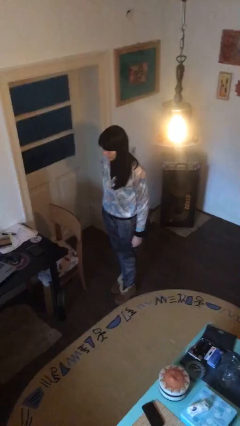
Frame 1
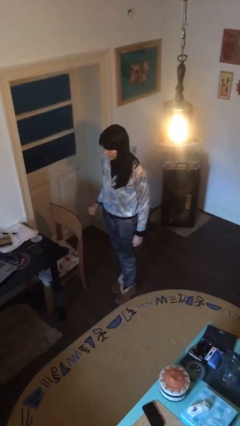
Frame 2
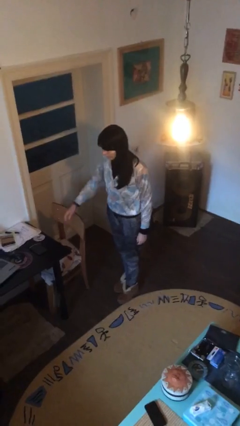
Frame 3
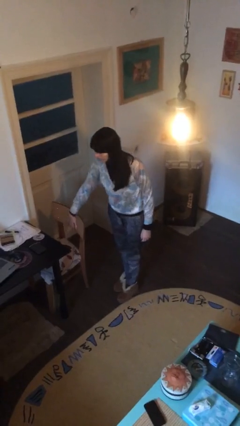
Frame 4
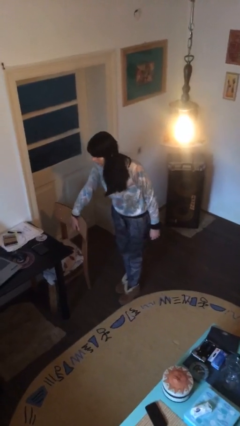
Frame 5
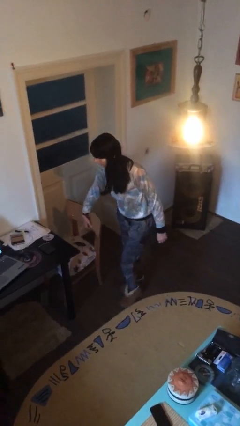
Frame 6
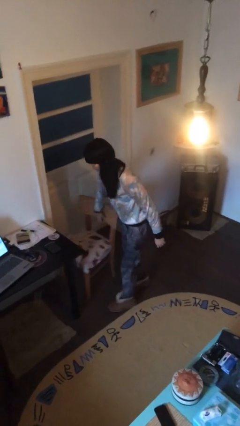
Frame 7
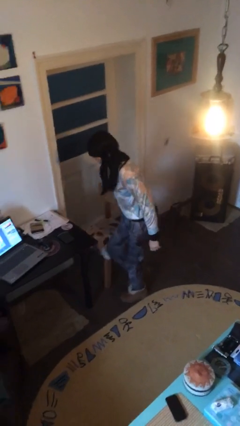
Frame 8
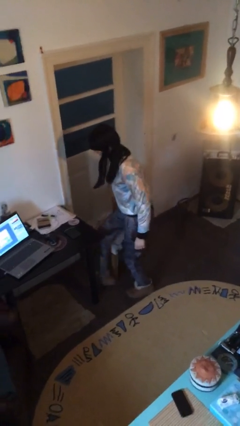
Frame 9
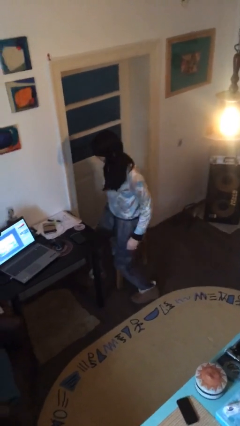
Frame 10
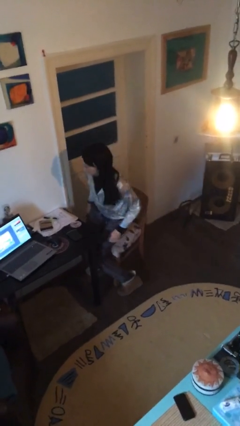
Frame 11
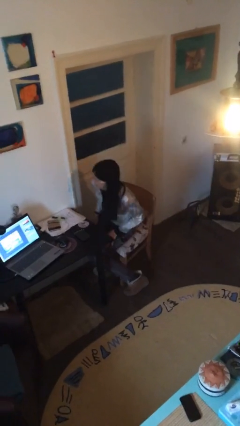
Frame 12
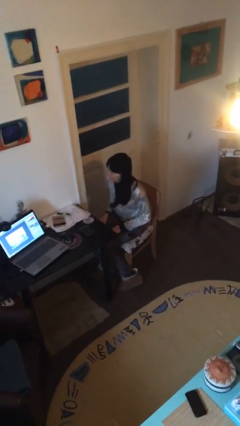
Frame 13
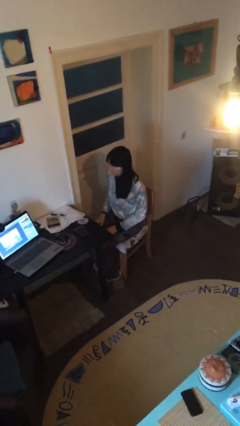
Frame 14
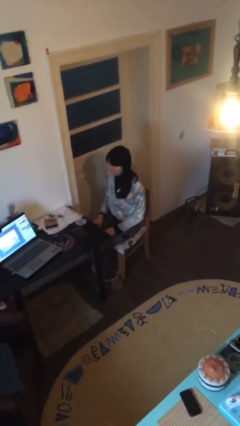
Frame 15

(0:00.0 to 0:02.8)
person sits down

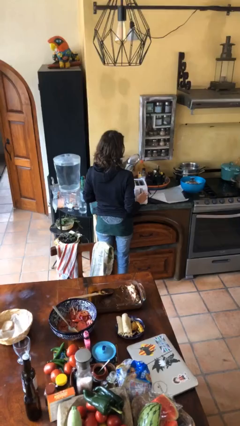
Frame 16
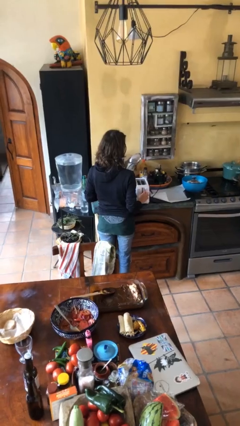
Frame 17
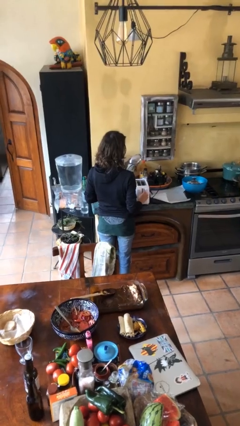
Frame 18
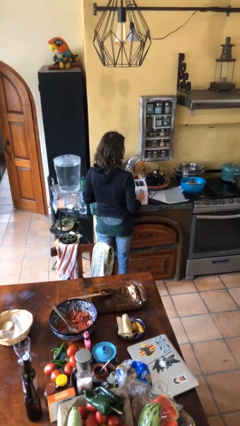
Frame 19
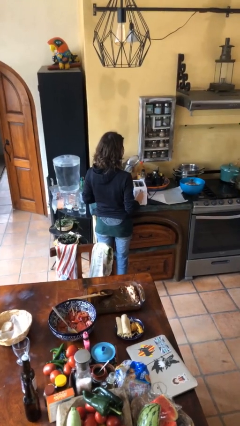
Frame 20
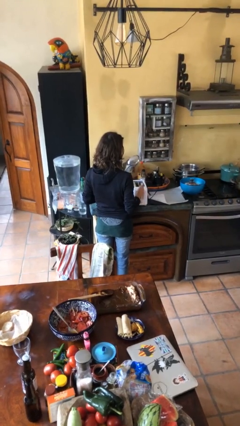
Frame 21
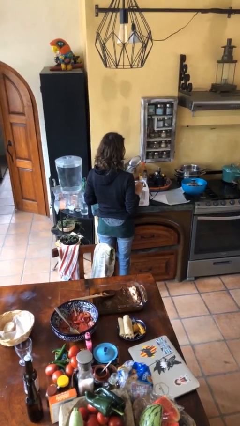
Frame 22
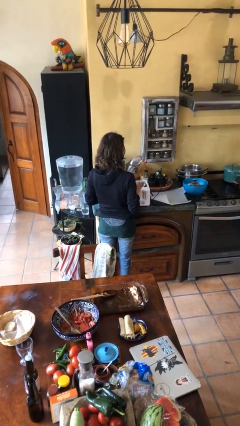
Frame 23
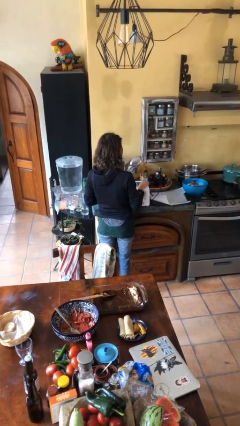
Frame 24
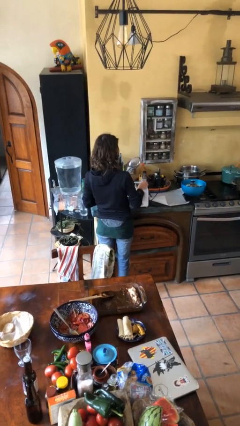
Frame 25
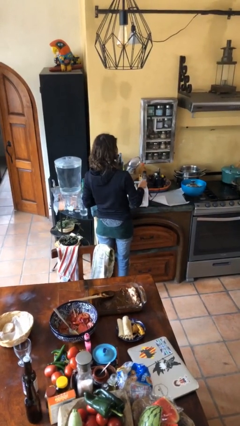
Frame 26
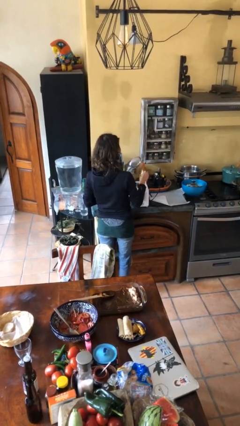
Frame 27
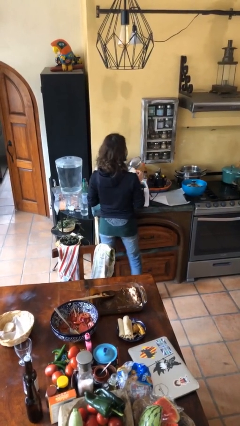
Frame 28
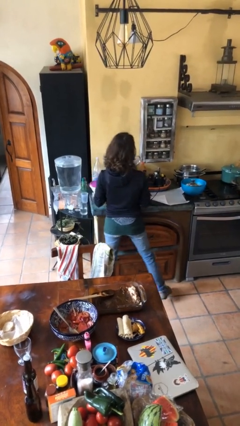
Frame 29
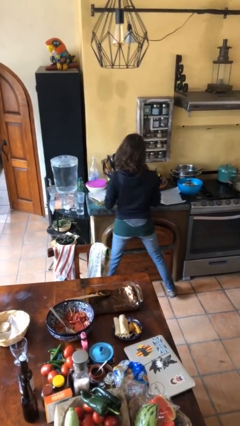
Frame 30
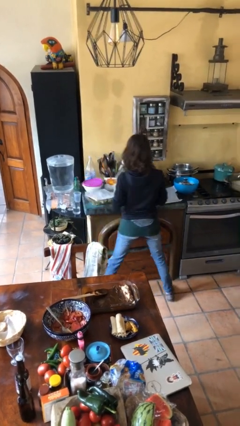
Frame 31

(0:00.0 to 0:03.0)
person takes object from toaster

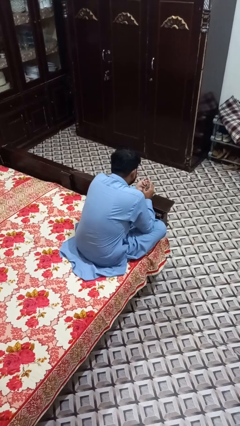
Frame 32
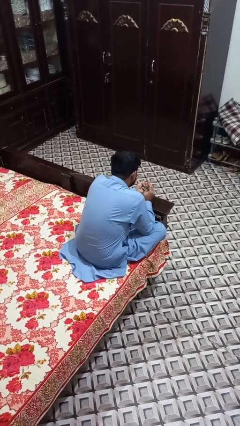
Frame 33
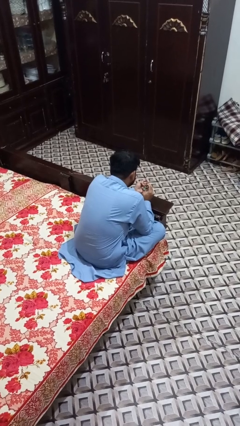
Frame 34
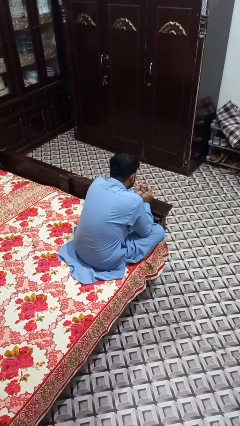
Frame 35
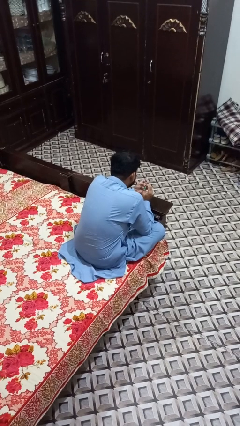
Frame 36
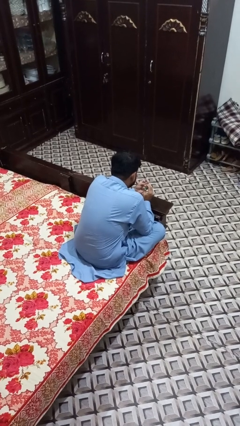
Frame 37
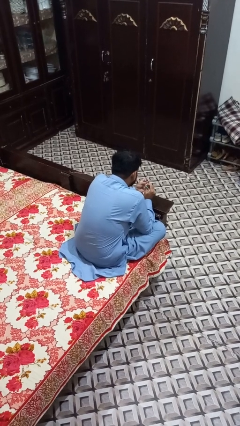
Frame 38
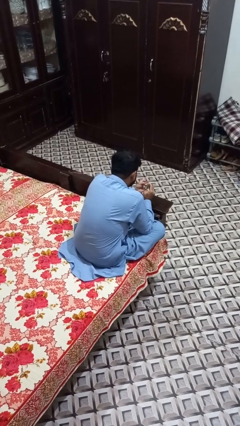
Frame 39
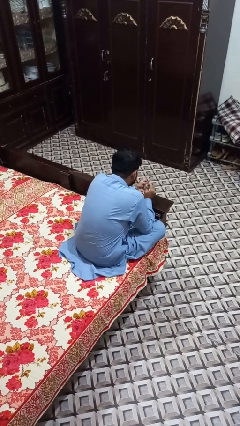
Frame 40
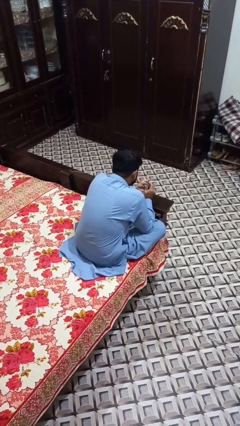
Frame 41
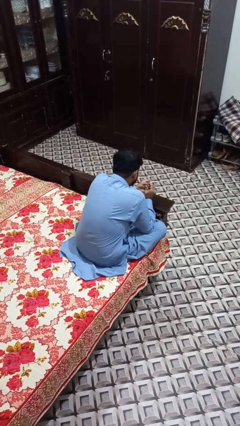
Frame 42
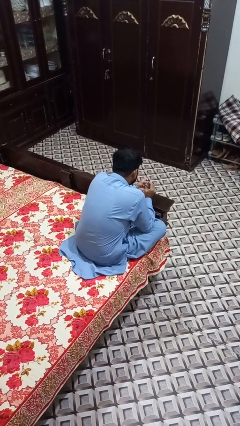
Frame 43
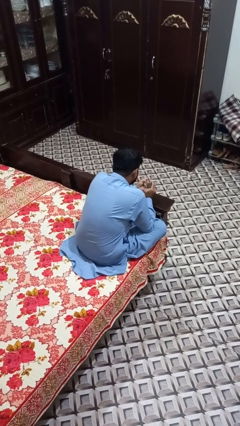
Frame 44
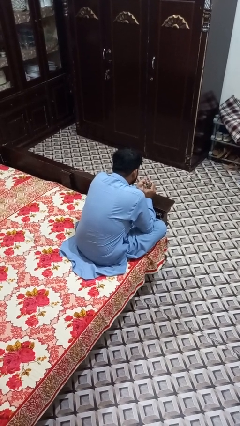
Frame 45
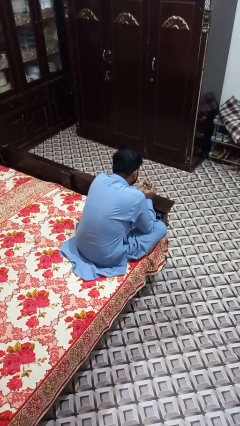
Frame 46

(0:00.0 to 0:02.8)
person clips fingernails

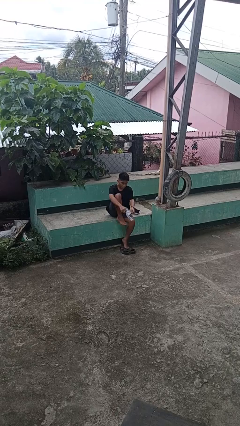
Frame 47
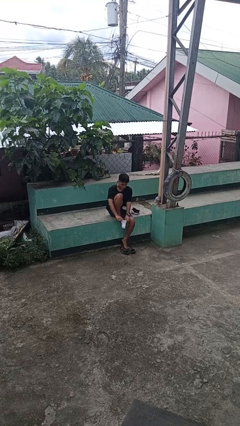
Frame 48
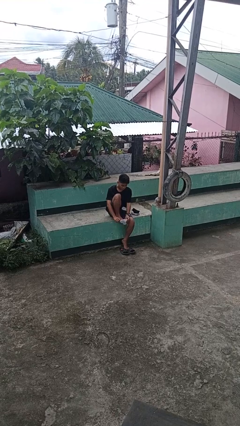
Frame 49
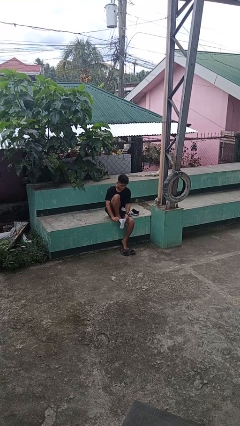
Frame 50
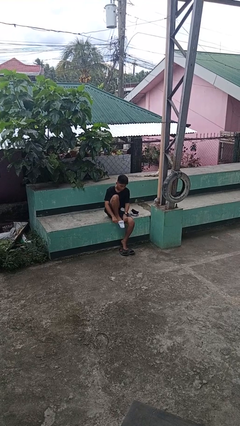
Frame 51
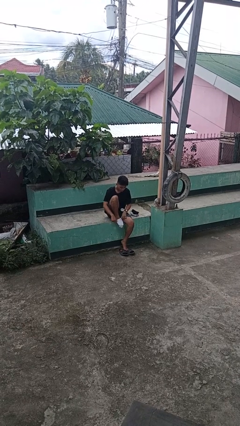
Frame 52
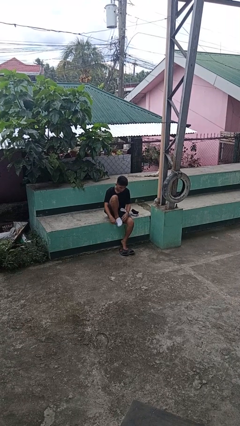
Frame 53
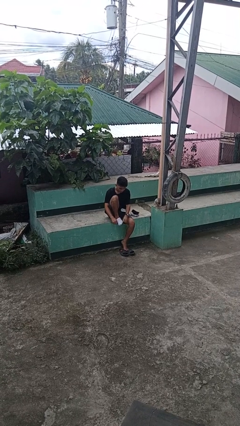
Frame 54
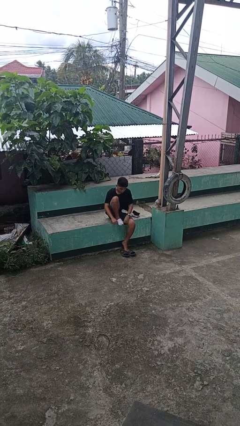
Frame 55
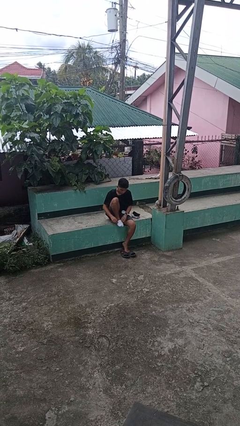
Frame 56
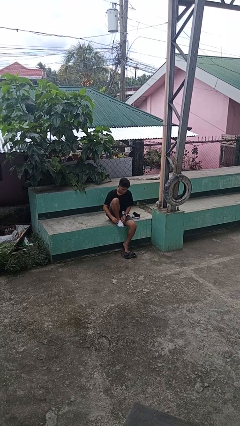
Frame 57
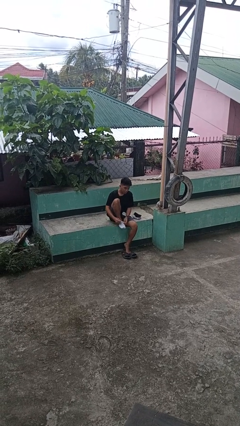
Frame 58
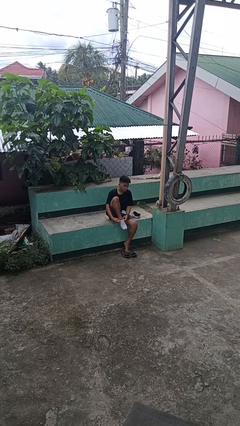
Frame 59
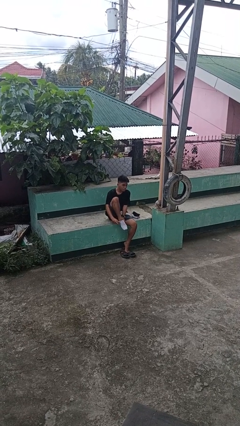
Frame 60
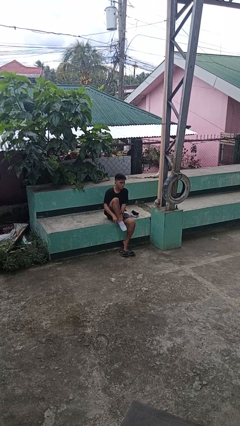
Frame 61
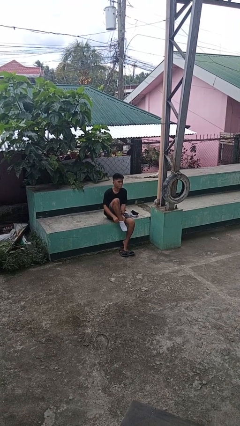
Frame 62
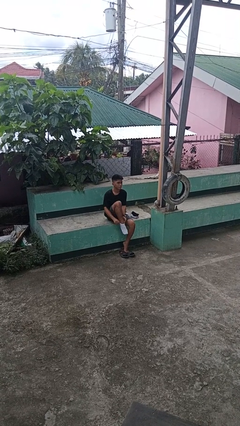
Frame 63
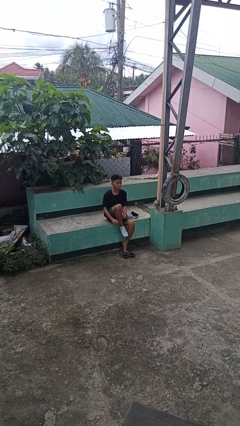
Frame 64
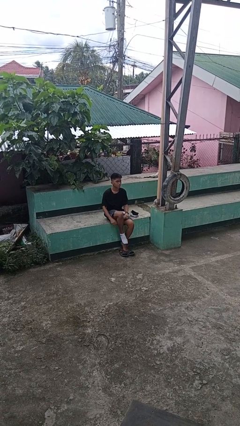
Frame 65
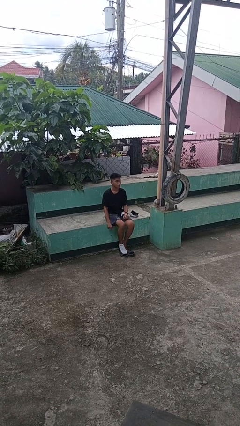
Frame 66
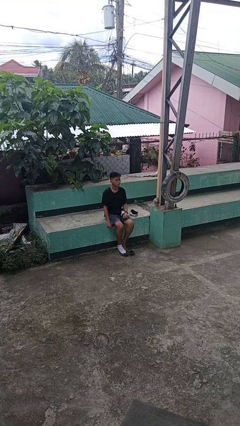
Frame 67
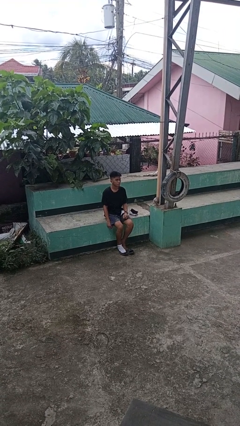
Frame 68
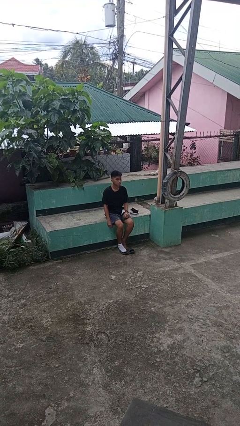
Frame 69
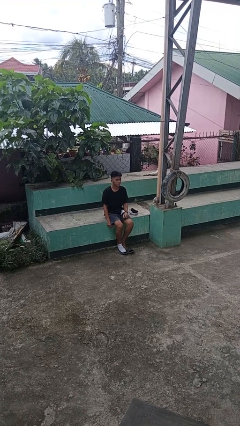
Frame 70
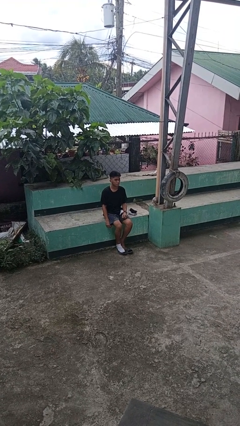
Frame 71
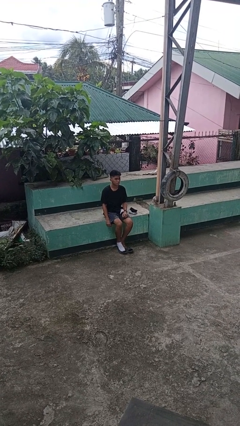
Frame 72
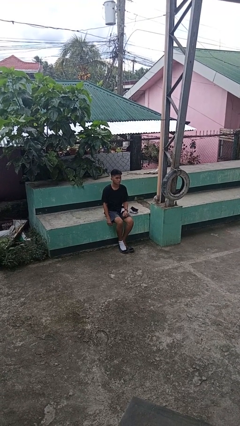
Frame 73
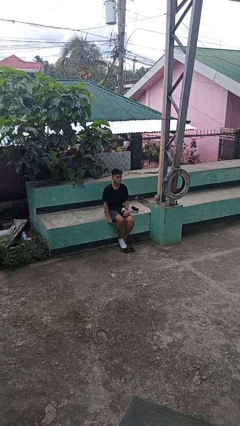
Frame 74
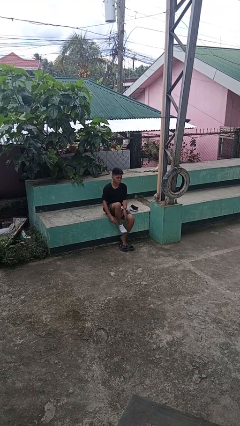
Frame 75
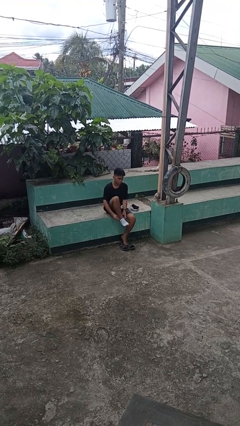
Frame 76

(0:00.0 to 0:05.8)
person puts on socks

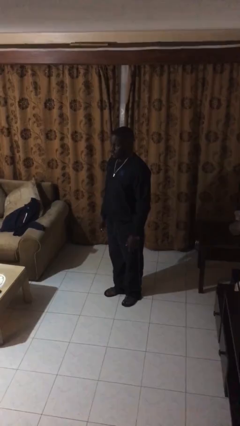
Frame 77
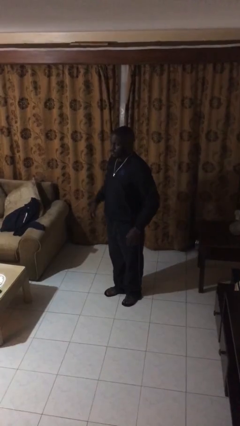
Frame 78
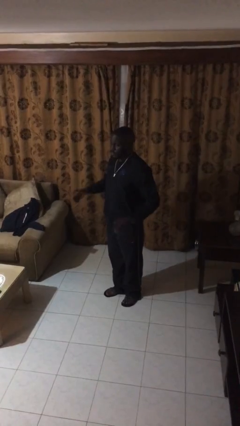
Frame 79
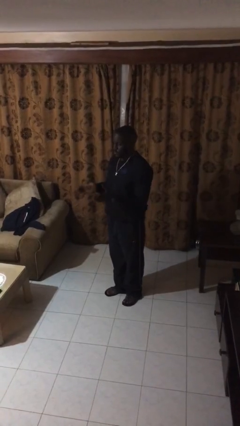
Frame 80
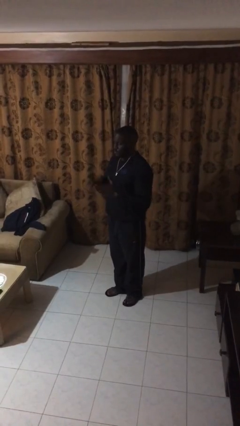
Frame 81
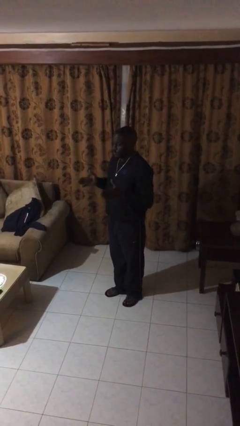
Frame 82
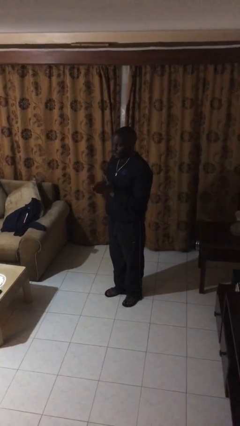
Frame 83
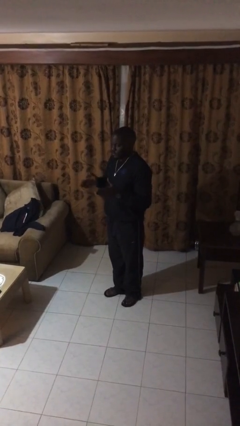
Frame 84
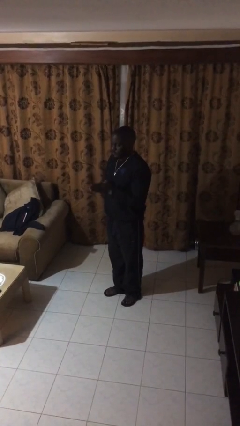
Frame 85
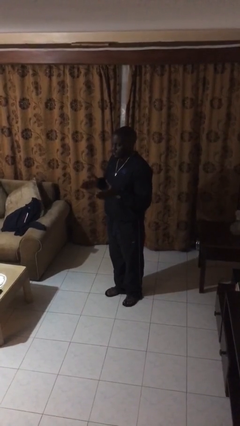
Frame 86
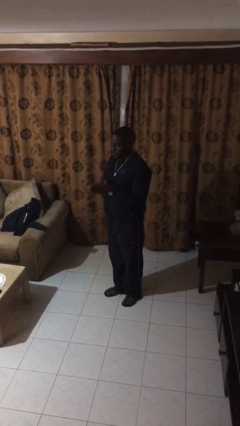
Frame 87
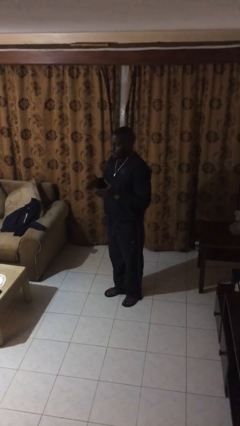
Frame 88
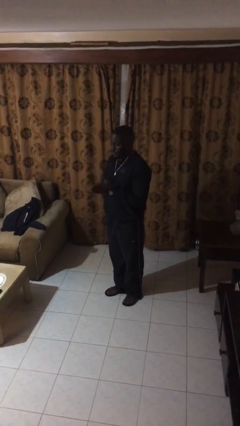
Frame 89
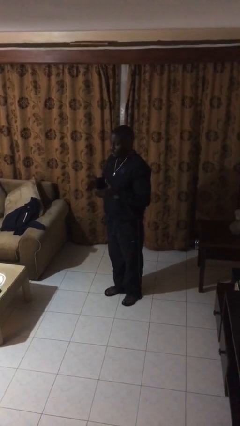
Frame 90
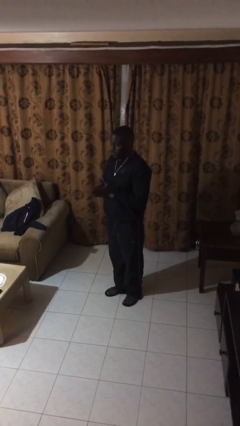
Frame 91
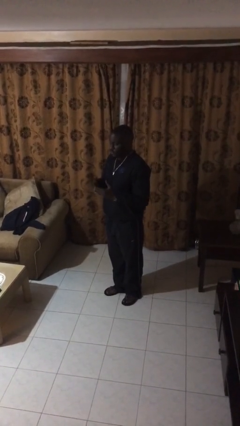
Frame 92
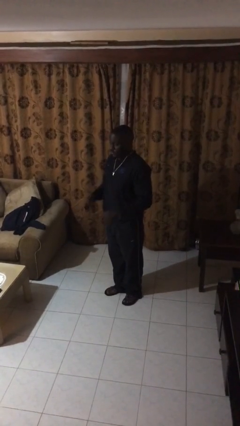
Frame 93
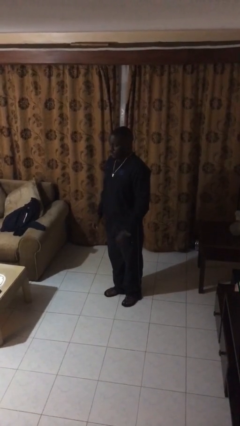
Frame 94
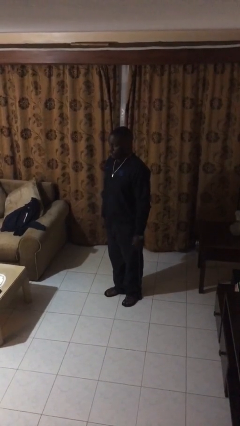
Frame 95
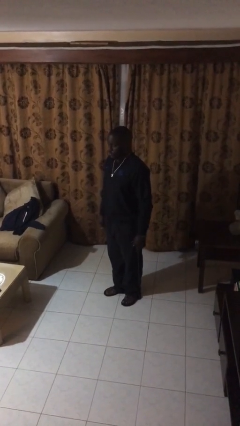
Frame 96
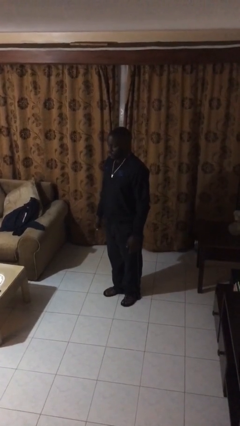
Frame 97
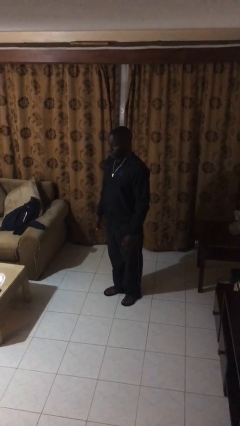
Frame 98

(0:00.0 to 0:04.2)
person claps hands
